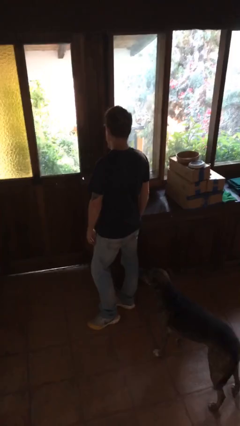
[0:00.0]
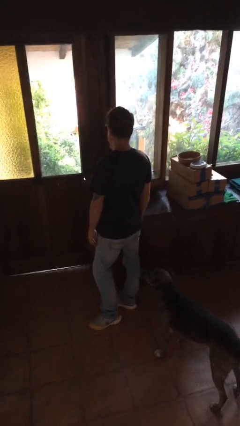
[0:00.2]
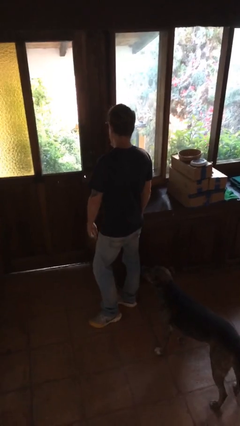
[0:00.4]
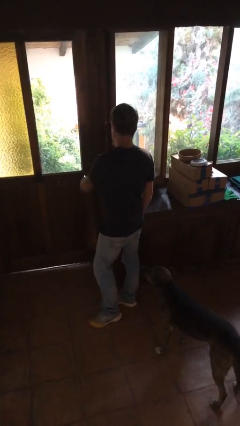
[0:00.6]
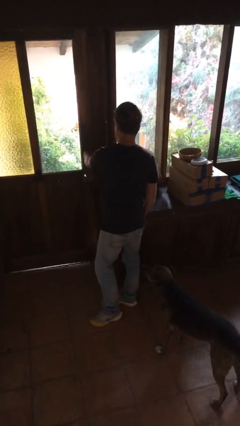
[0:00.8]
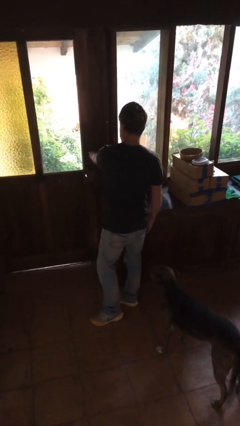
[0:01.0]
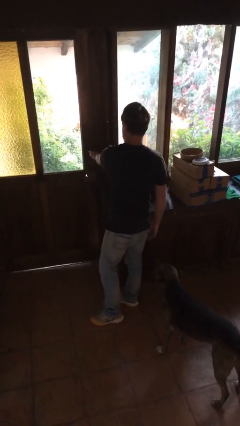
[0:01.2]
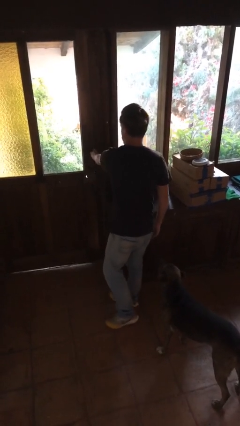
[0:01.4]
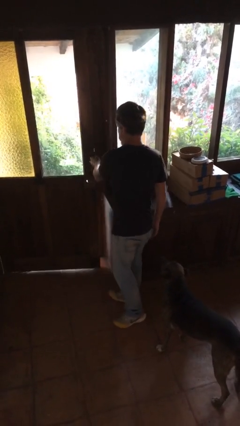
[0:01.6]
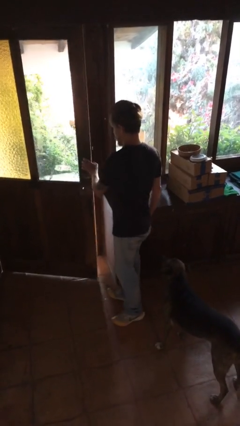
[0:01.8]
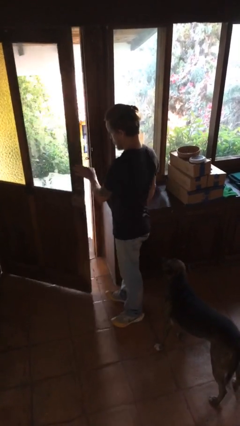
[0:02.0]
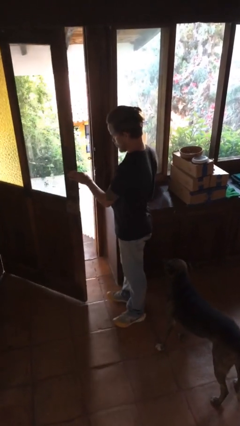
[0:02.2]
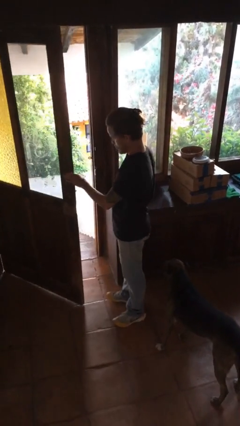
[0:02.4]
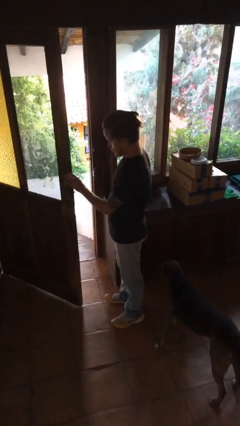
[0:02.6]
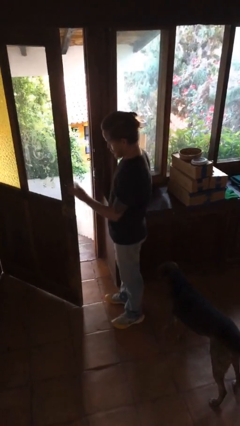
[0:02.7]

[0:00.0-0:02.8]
person opens facility door

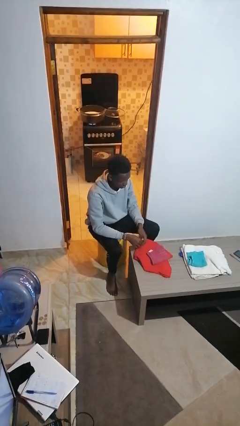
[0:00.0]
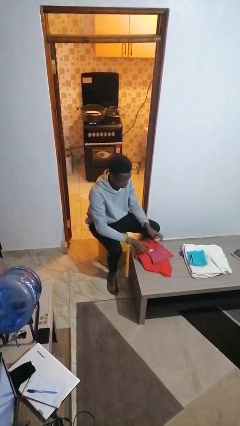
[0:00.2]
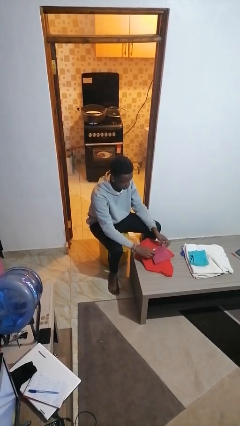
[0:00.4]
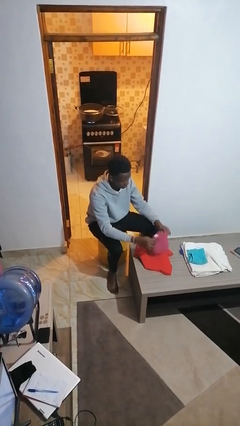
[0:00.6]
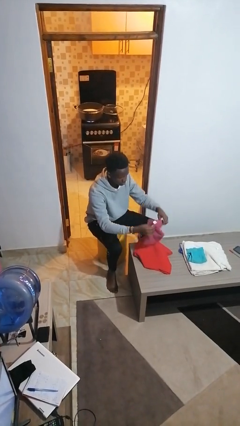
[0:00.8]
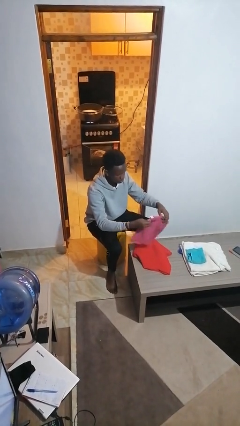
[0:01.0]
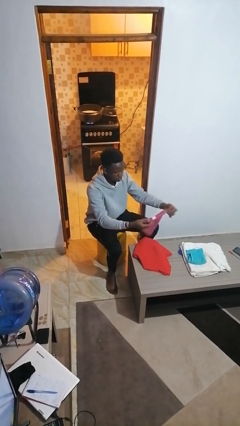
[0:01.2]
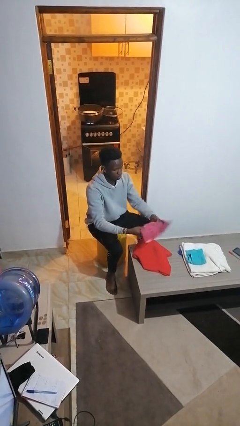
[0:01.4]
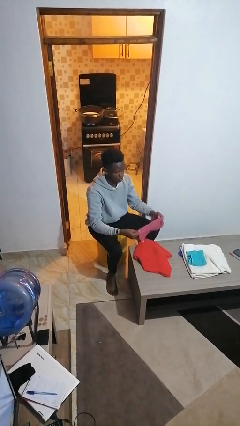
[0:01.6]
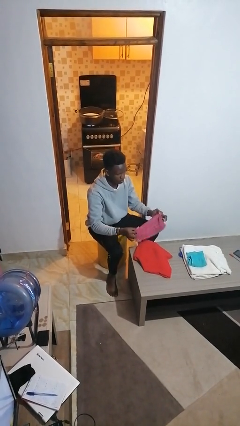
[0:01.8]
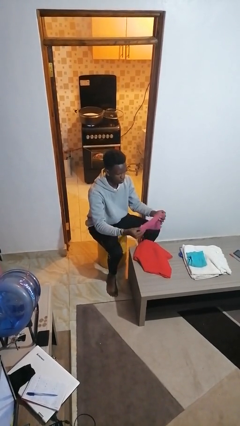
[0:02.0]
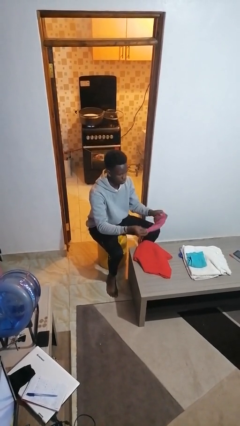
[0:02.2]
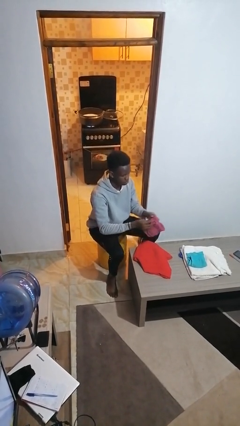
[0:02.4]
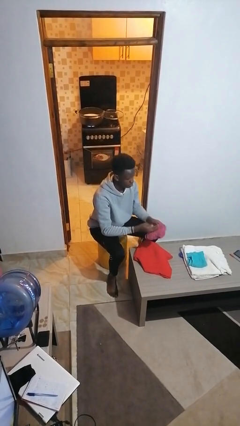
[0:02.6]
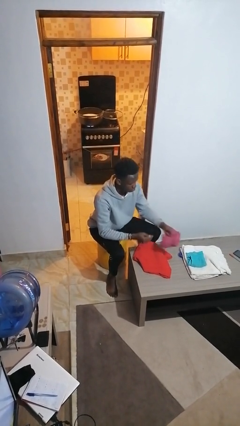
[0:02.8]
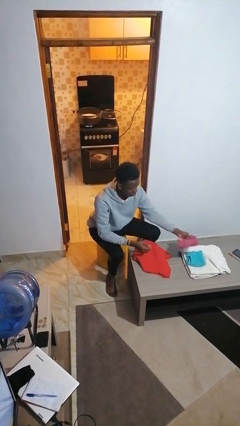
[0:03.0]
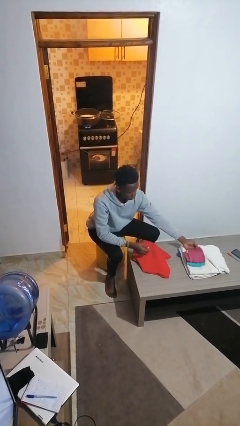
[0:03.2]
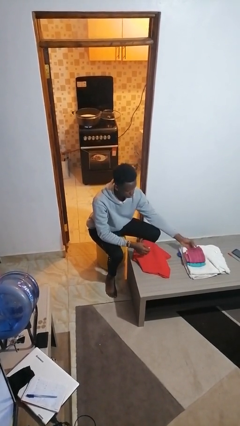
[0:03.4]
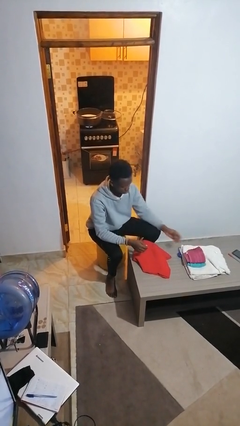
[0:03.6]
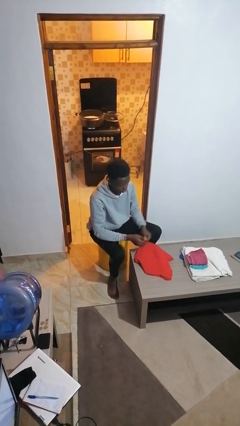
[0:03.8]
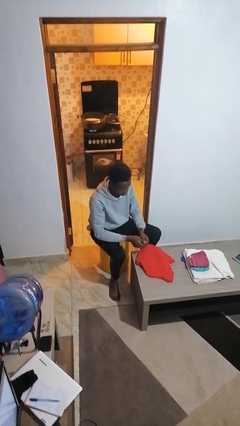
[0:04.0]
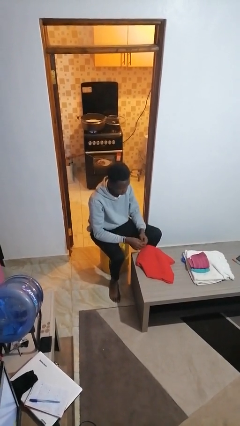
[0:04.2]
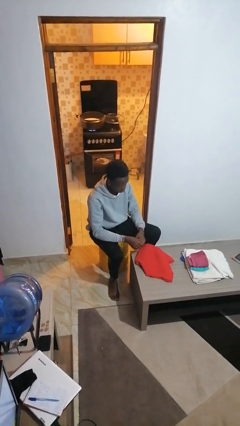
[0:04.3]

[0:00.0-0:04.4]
person folds towel

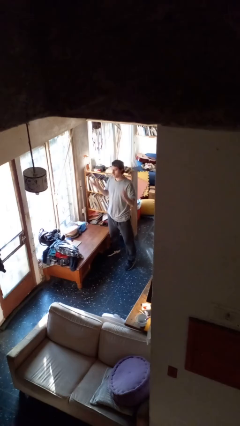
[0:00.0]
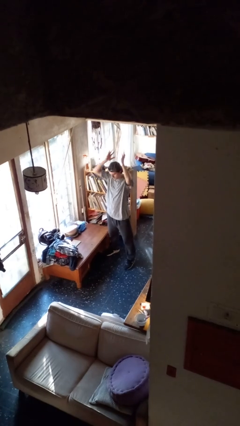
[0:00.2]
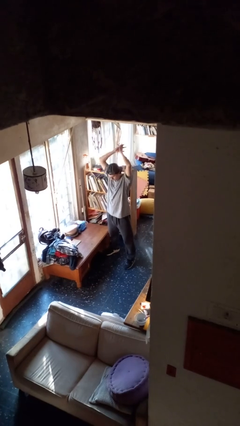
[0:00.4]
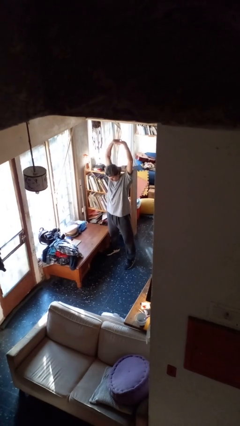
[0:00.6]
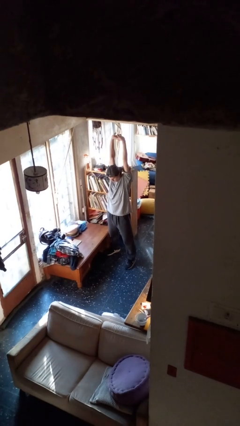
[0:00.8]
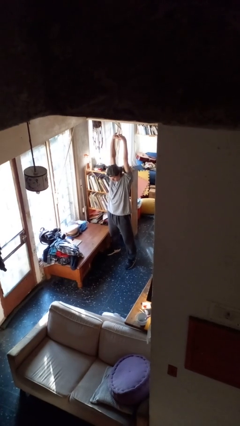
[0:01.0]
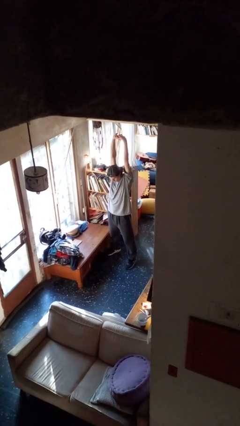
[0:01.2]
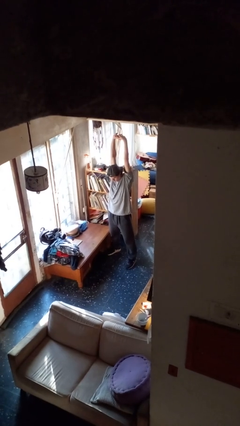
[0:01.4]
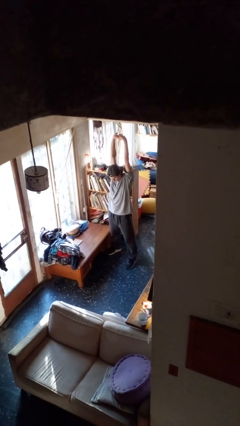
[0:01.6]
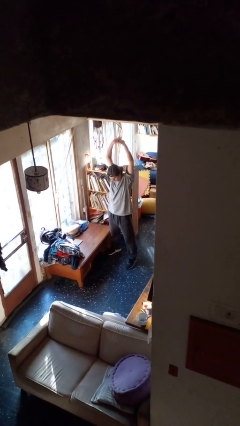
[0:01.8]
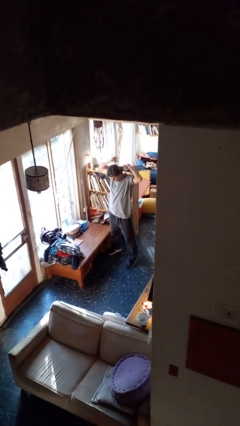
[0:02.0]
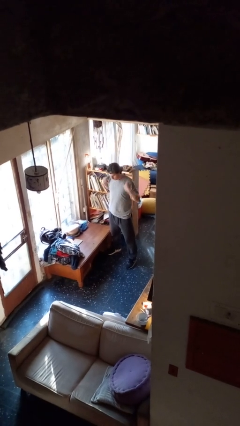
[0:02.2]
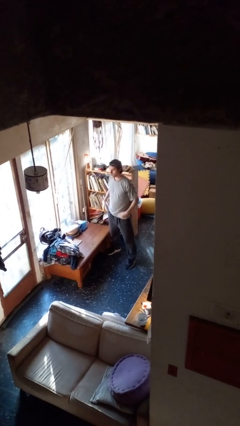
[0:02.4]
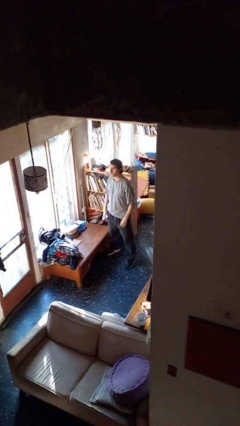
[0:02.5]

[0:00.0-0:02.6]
person stretches arms over head

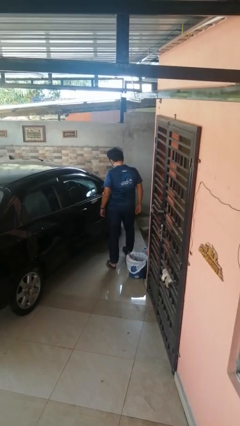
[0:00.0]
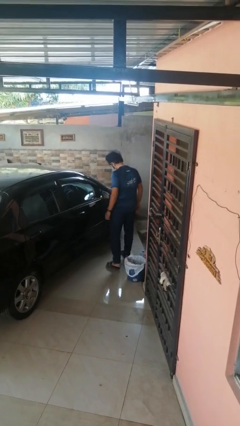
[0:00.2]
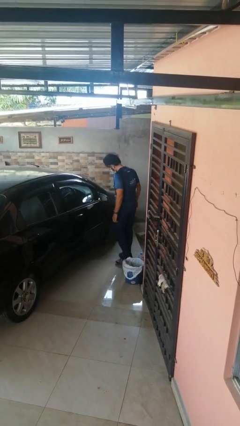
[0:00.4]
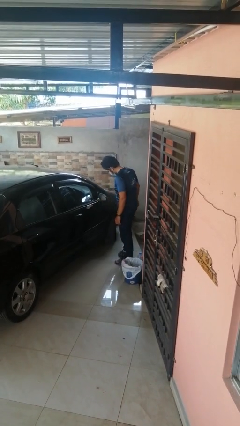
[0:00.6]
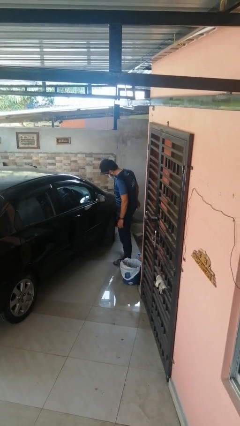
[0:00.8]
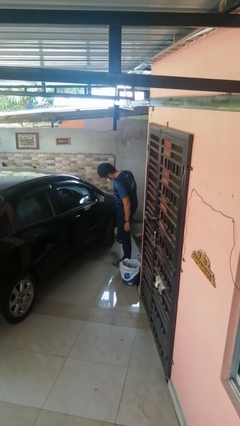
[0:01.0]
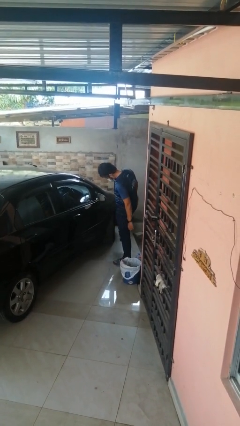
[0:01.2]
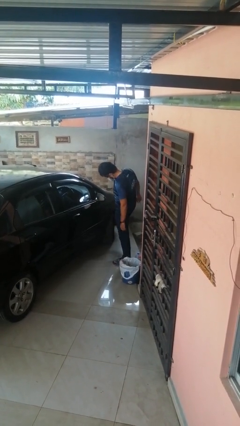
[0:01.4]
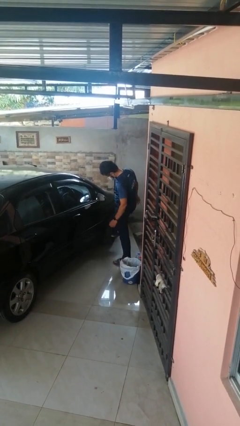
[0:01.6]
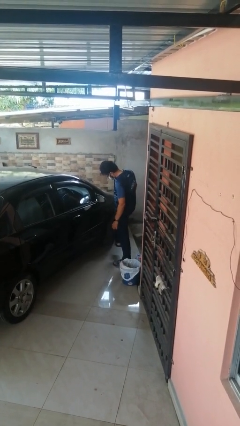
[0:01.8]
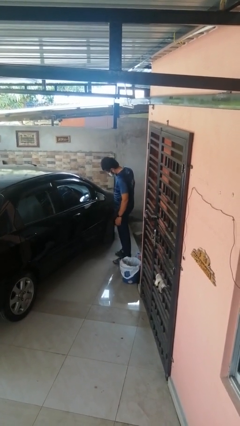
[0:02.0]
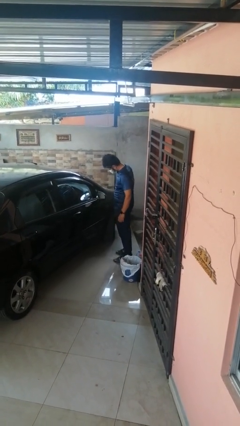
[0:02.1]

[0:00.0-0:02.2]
person kicks car tires

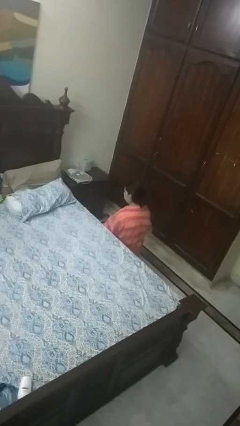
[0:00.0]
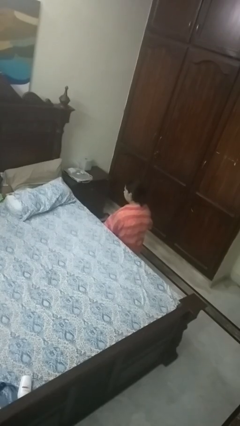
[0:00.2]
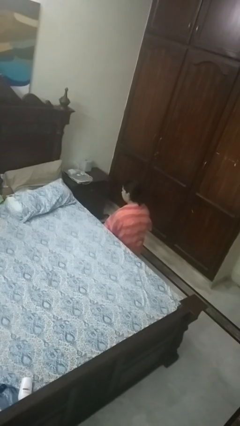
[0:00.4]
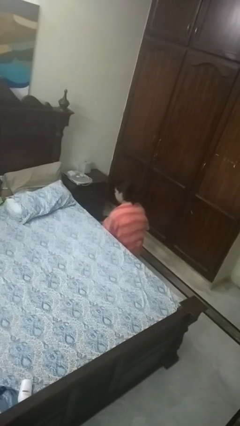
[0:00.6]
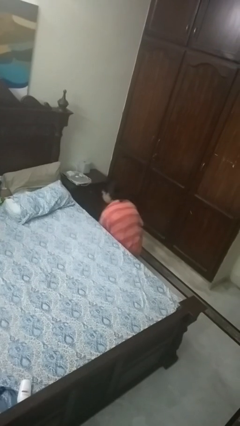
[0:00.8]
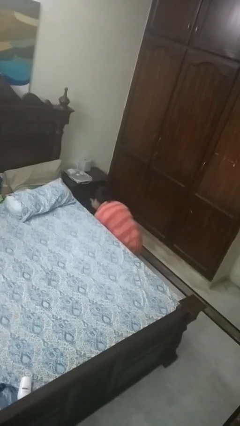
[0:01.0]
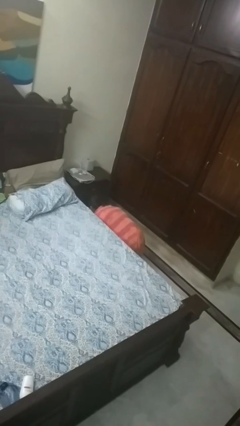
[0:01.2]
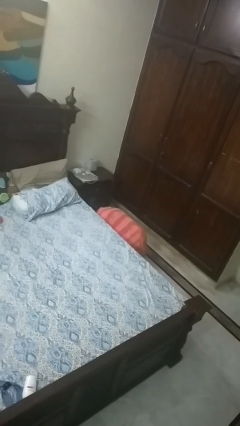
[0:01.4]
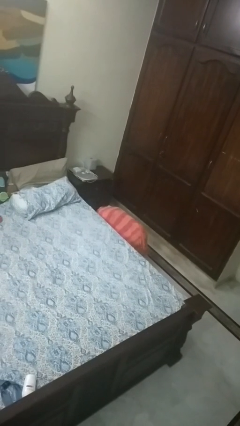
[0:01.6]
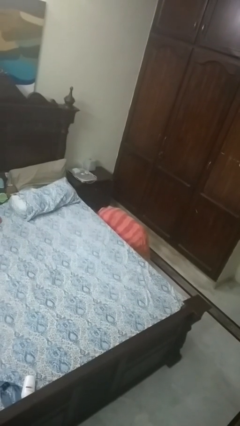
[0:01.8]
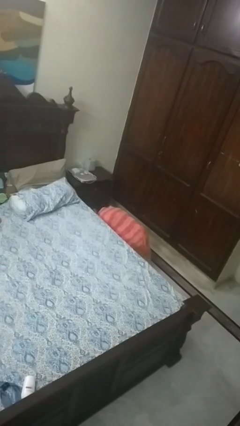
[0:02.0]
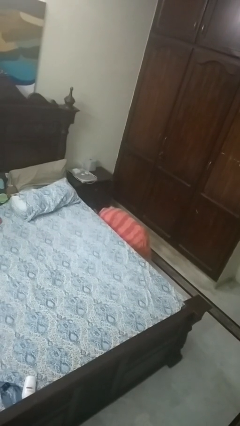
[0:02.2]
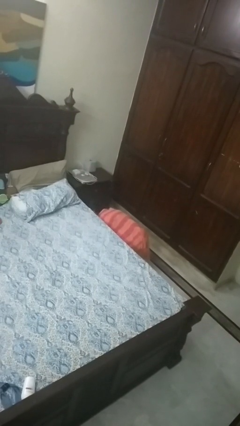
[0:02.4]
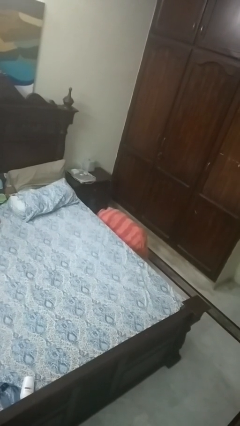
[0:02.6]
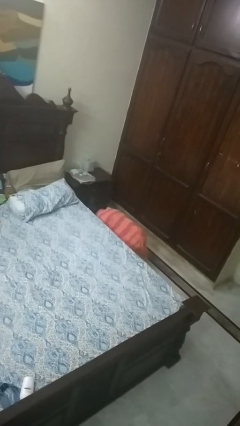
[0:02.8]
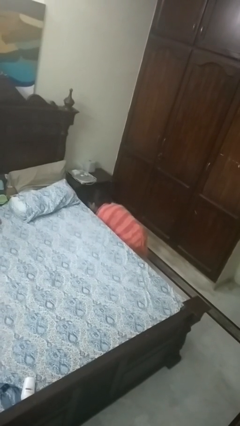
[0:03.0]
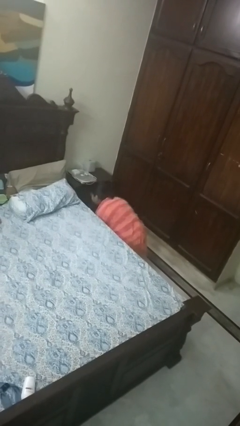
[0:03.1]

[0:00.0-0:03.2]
person searches under bed

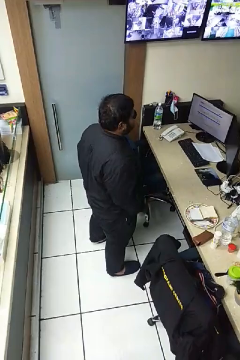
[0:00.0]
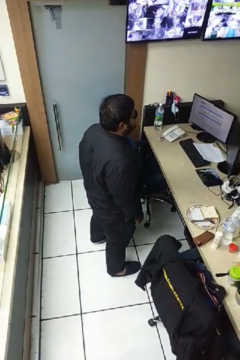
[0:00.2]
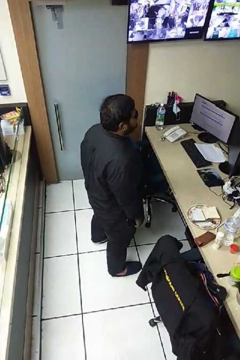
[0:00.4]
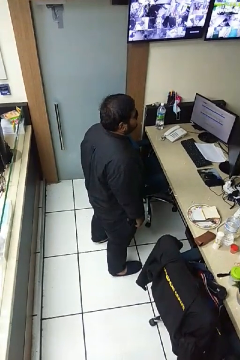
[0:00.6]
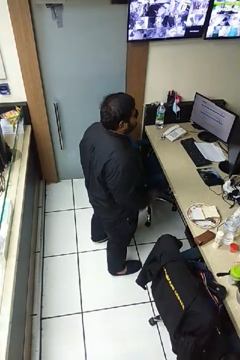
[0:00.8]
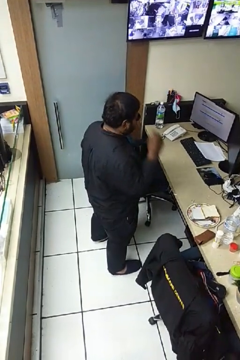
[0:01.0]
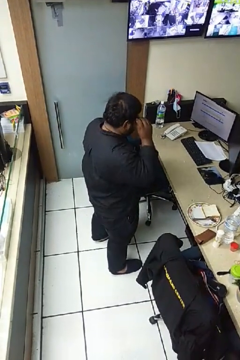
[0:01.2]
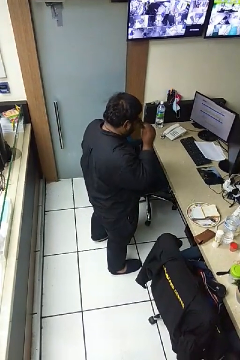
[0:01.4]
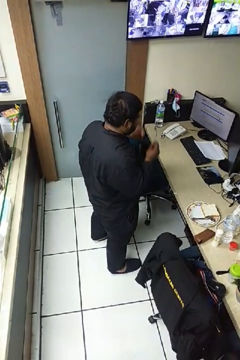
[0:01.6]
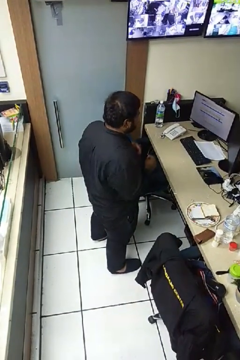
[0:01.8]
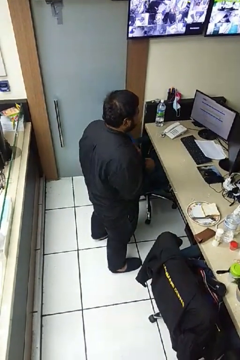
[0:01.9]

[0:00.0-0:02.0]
person takes off sunglasses

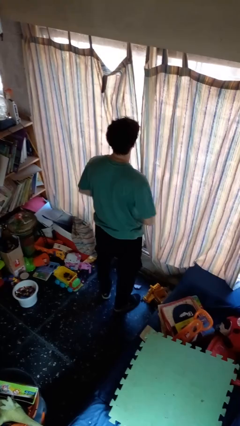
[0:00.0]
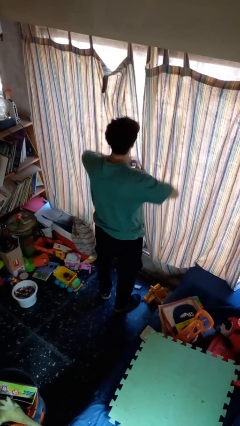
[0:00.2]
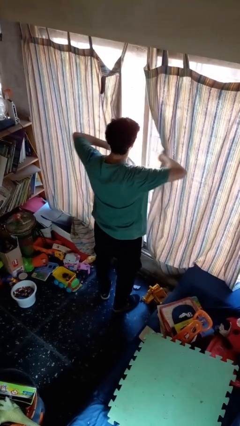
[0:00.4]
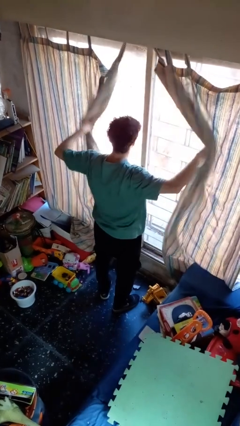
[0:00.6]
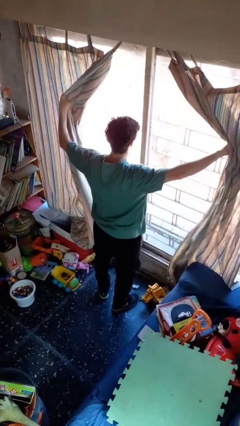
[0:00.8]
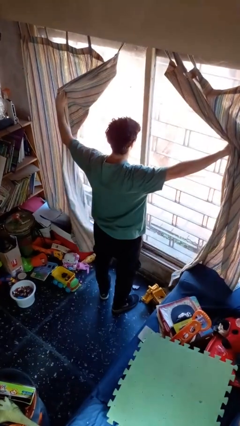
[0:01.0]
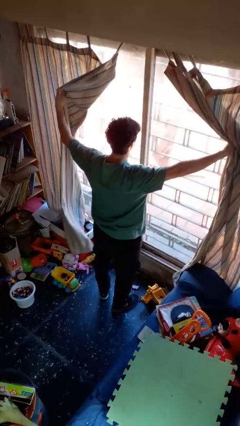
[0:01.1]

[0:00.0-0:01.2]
person opens curtains
